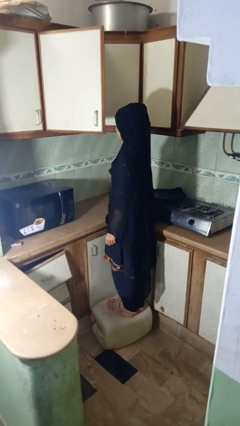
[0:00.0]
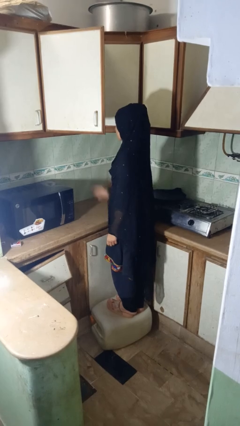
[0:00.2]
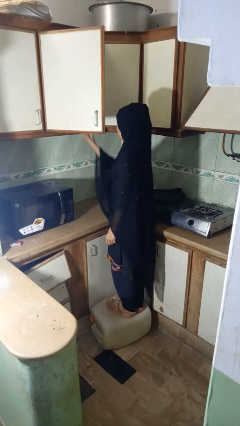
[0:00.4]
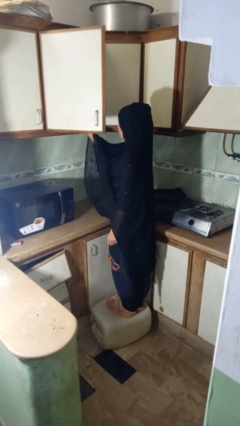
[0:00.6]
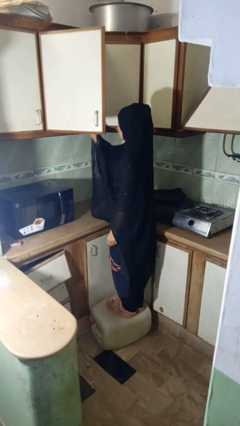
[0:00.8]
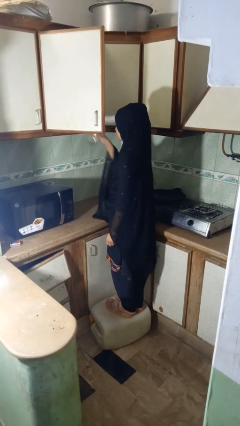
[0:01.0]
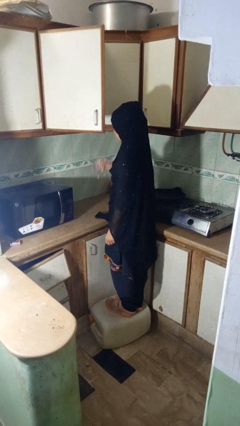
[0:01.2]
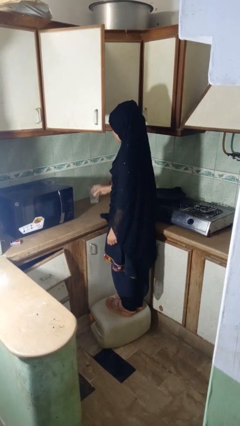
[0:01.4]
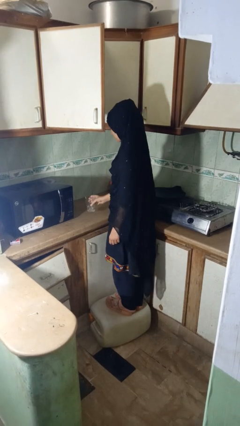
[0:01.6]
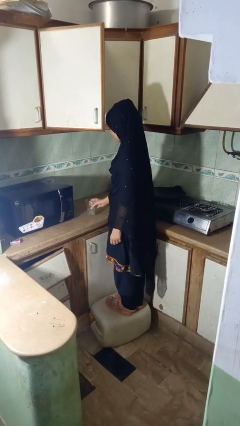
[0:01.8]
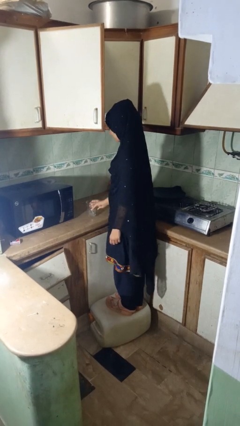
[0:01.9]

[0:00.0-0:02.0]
person puts down object into cabinet

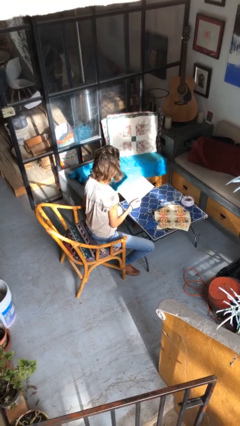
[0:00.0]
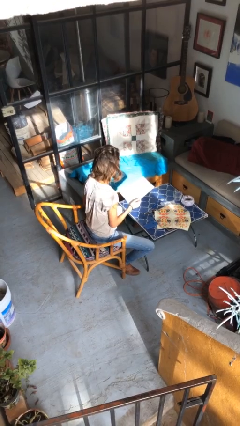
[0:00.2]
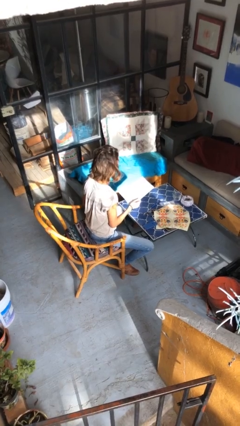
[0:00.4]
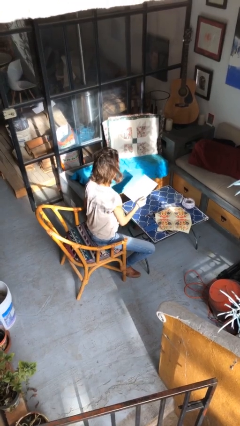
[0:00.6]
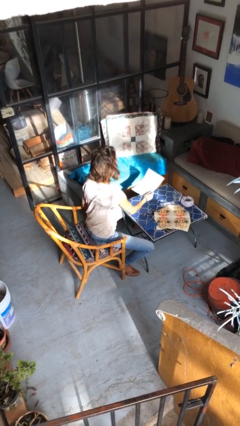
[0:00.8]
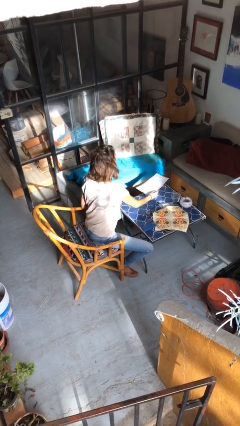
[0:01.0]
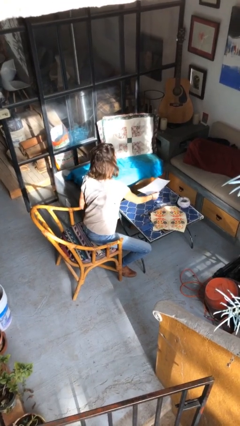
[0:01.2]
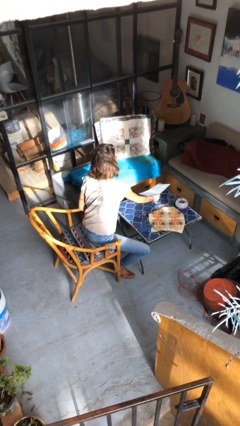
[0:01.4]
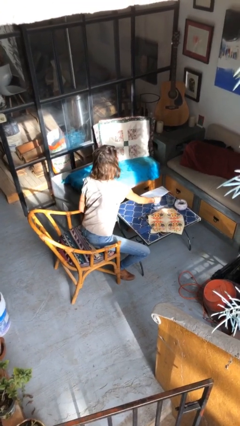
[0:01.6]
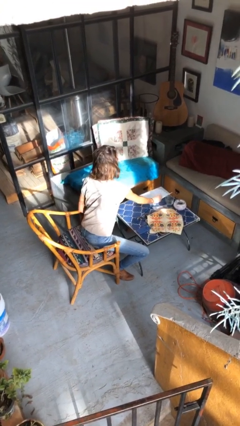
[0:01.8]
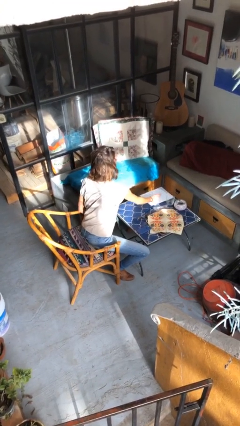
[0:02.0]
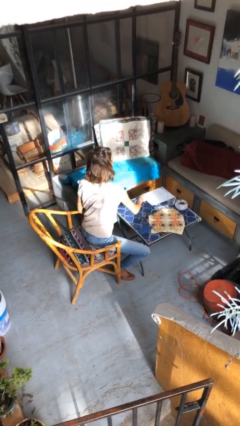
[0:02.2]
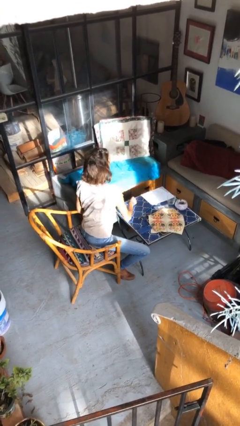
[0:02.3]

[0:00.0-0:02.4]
person puts down object on table

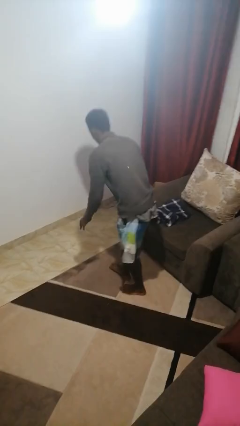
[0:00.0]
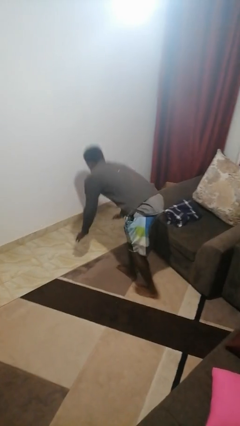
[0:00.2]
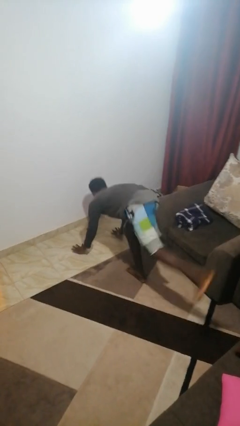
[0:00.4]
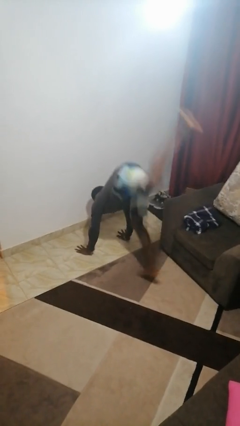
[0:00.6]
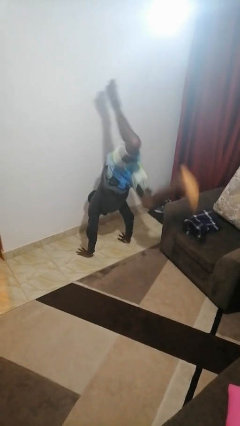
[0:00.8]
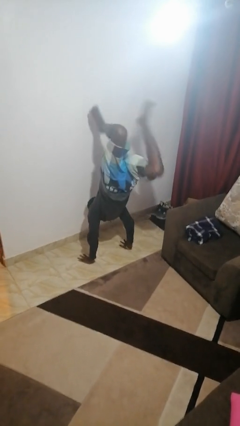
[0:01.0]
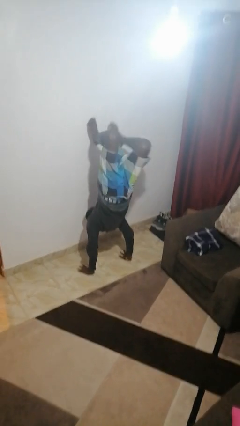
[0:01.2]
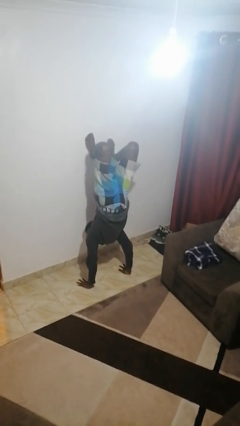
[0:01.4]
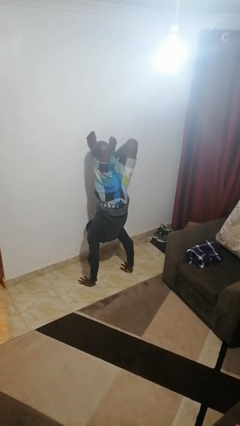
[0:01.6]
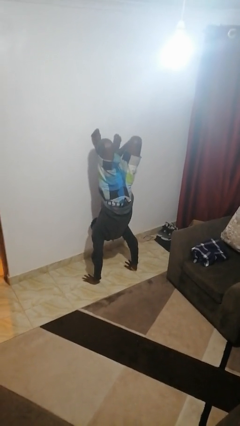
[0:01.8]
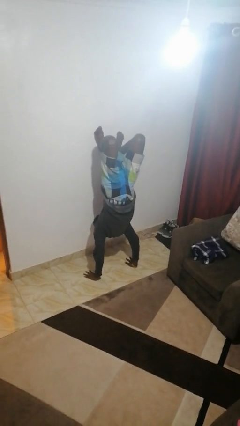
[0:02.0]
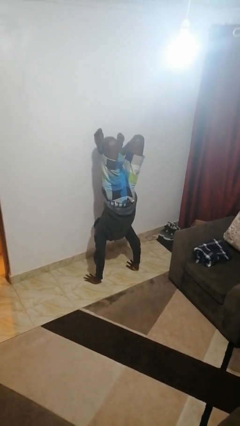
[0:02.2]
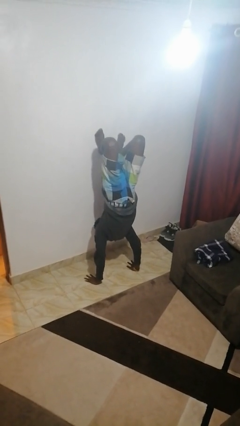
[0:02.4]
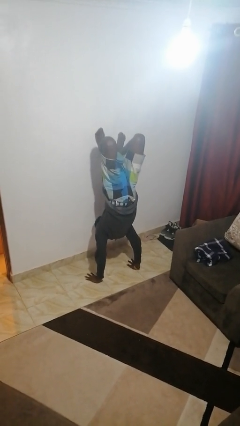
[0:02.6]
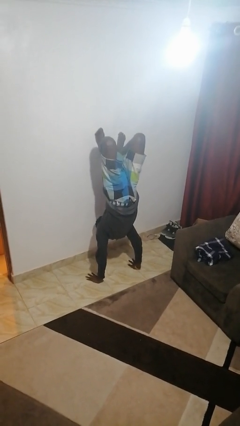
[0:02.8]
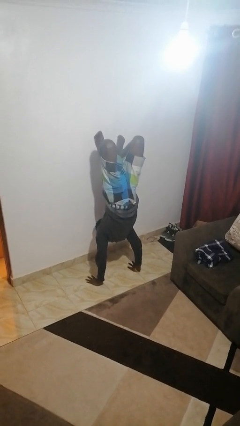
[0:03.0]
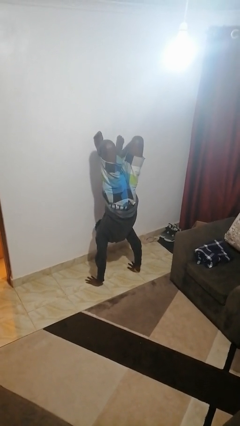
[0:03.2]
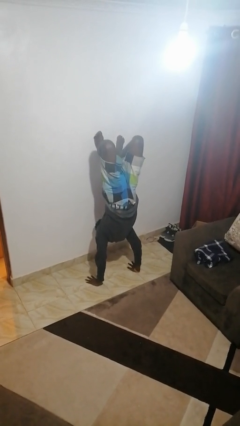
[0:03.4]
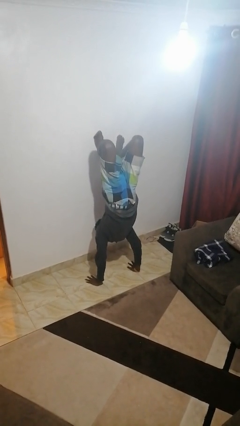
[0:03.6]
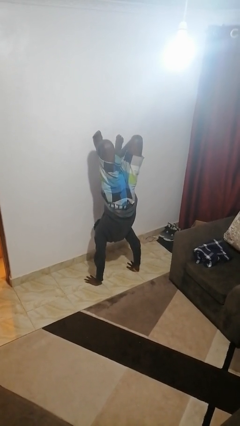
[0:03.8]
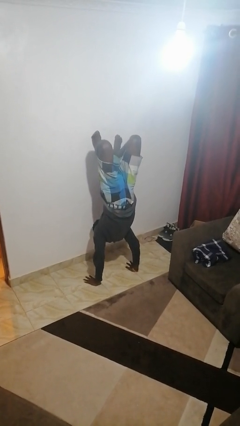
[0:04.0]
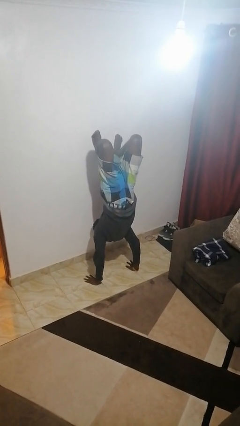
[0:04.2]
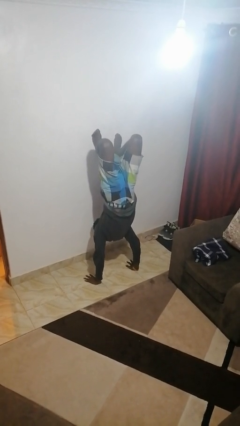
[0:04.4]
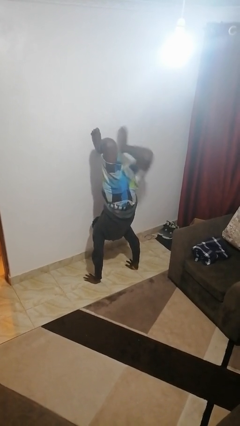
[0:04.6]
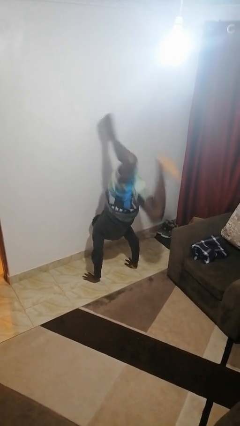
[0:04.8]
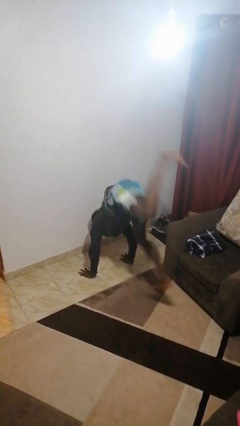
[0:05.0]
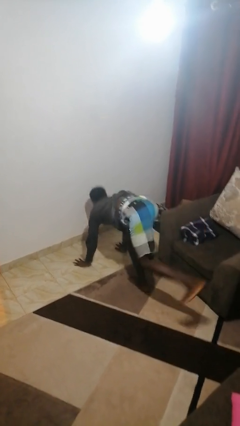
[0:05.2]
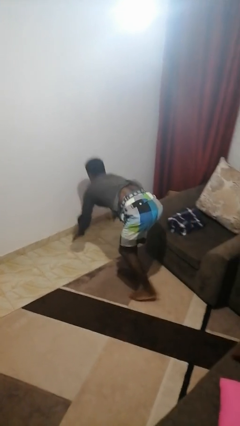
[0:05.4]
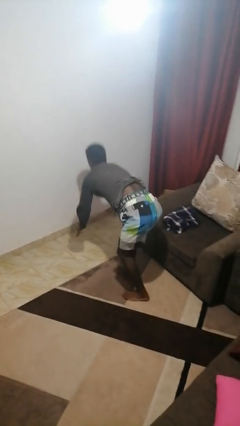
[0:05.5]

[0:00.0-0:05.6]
person handstand

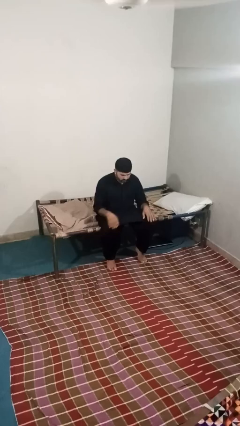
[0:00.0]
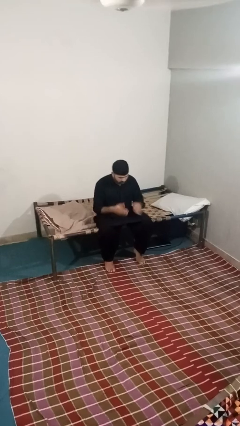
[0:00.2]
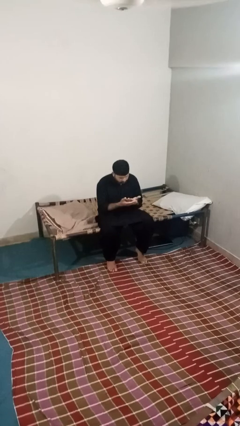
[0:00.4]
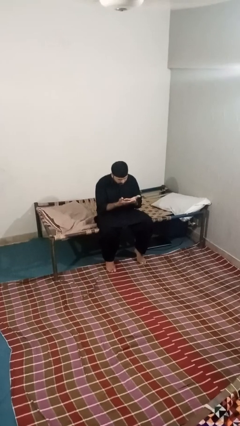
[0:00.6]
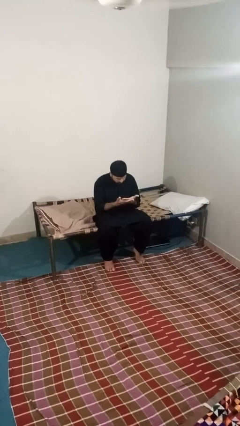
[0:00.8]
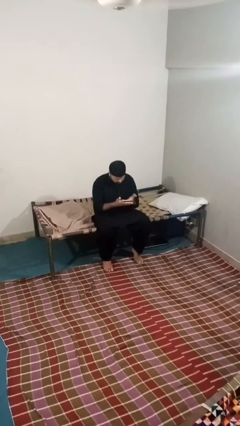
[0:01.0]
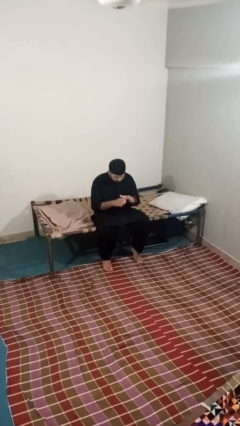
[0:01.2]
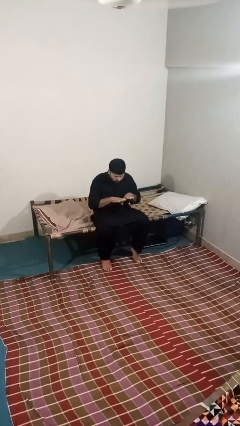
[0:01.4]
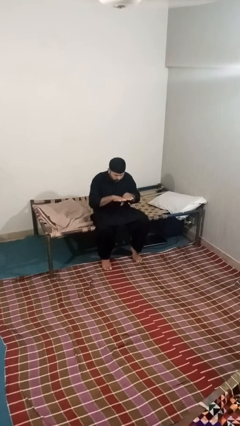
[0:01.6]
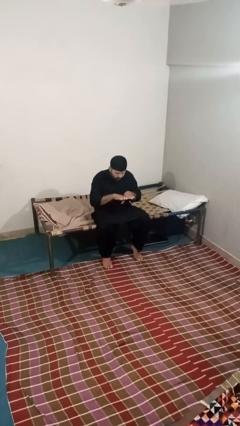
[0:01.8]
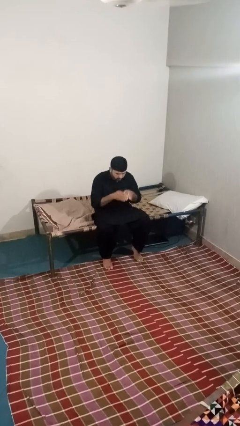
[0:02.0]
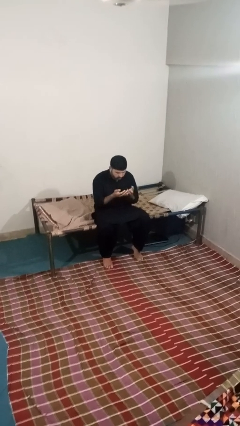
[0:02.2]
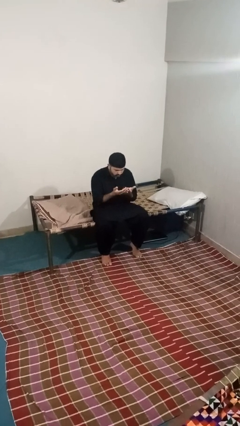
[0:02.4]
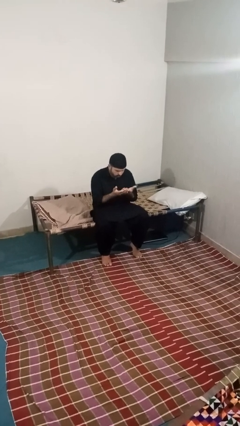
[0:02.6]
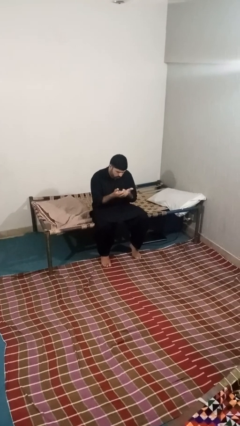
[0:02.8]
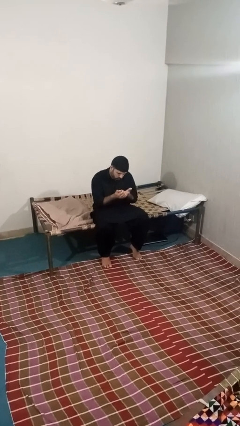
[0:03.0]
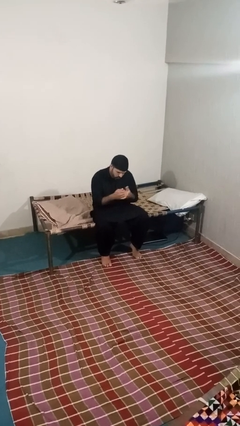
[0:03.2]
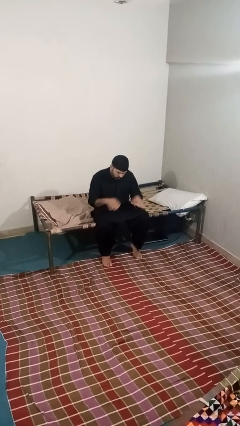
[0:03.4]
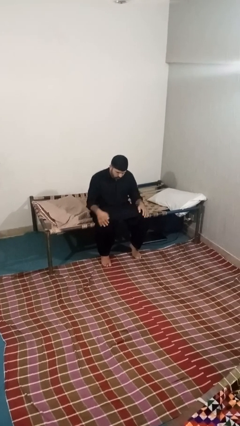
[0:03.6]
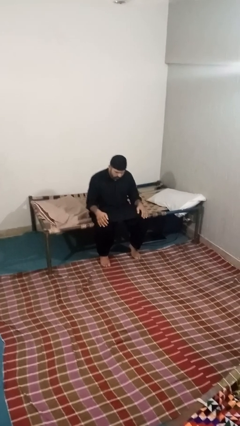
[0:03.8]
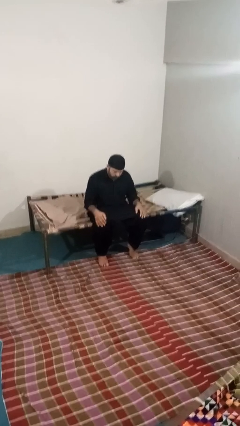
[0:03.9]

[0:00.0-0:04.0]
person looks at hands in lap

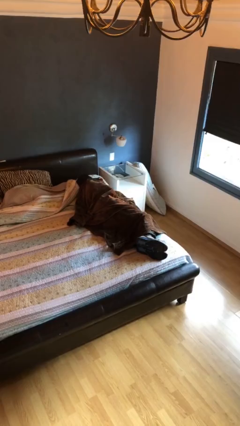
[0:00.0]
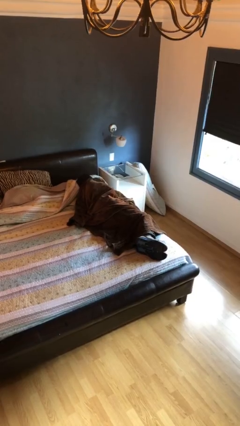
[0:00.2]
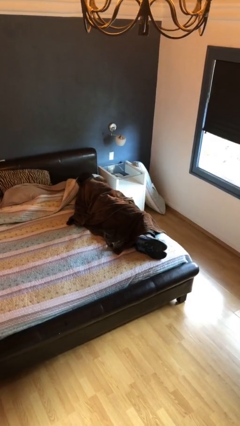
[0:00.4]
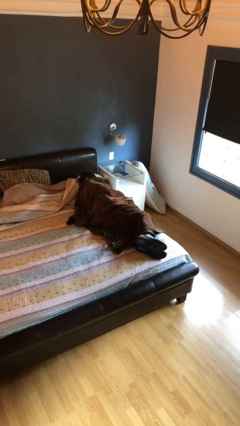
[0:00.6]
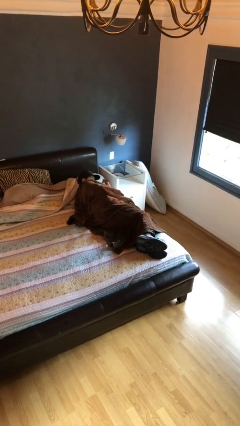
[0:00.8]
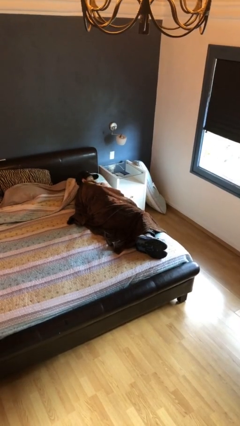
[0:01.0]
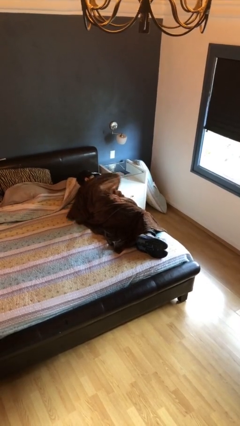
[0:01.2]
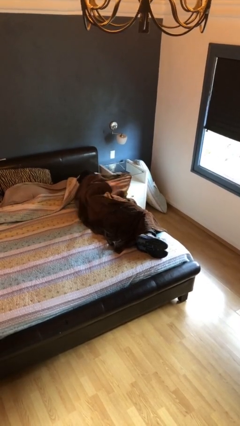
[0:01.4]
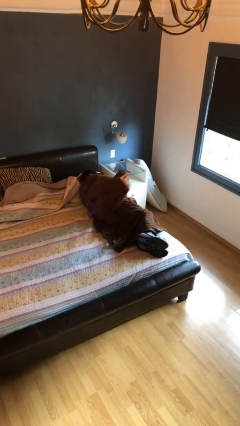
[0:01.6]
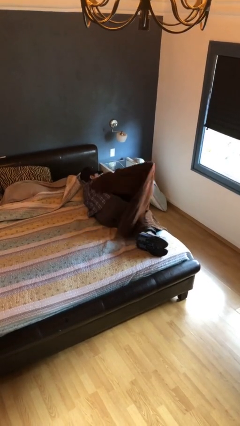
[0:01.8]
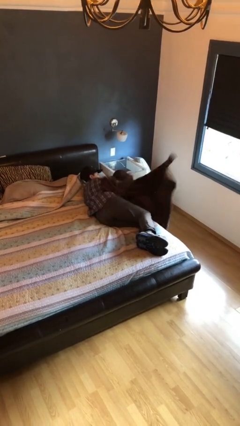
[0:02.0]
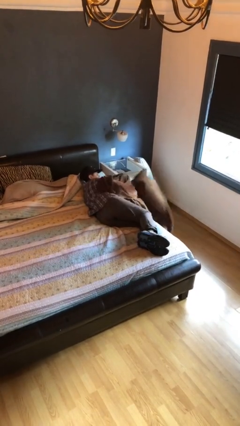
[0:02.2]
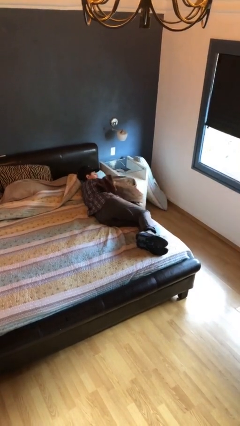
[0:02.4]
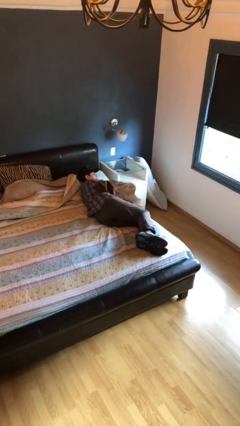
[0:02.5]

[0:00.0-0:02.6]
person uncovers with blanket

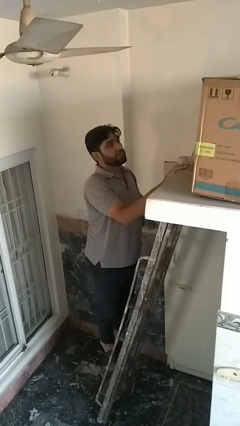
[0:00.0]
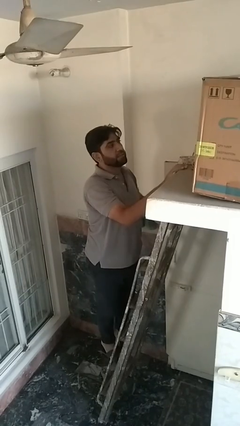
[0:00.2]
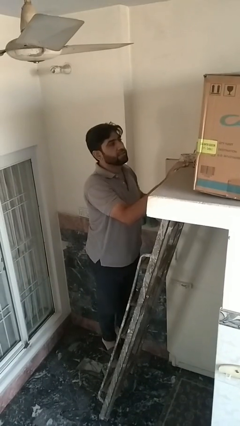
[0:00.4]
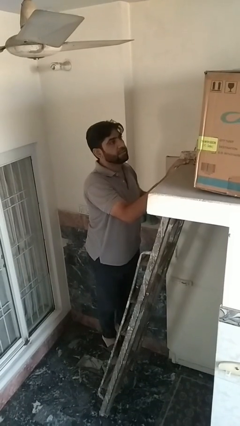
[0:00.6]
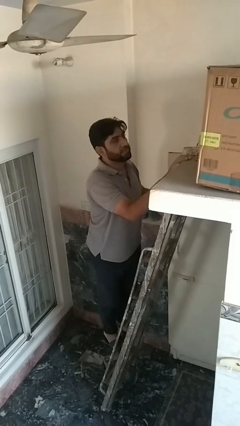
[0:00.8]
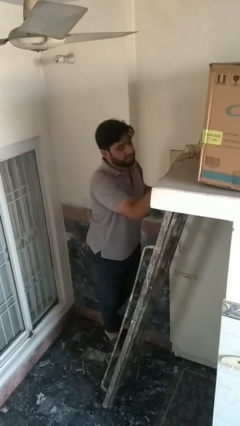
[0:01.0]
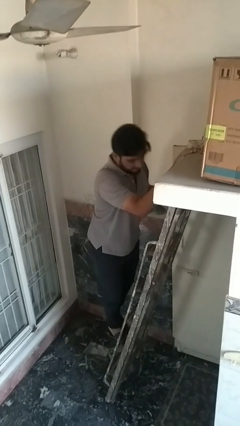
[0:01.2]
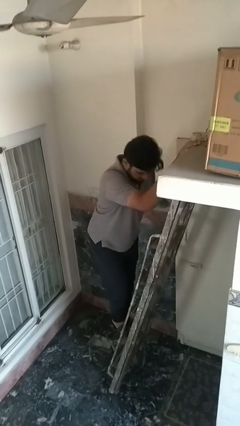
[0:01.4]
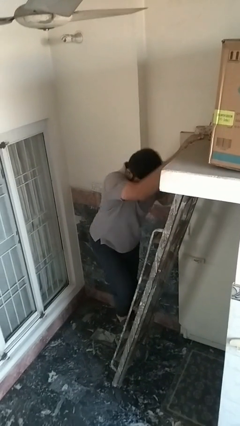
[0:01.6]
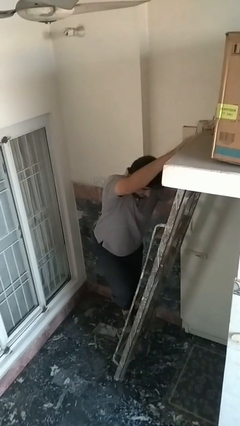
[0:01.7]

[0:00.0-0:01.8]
person climbs down ladder
